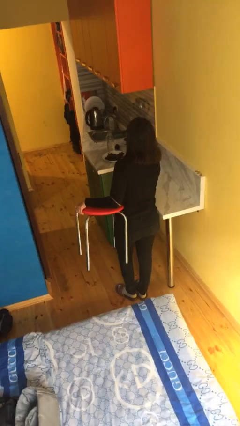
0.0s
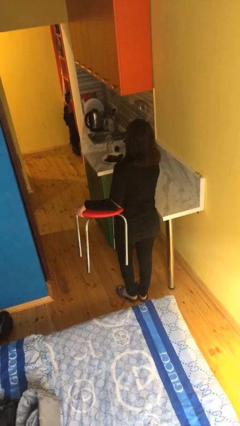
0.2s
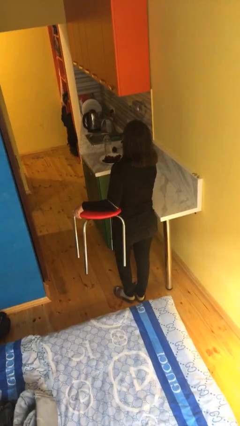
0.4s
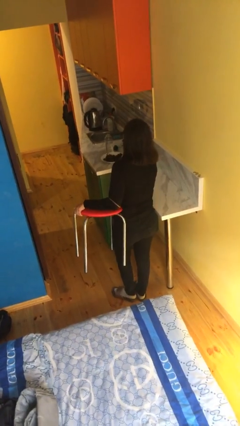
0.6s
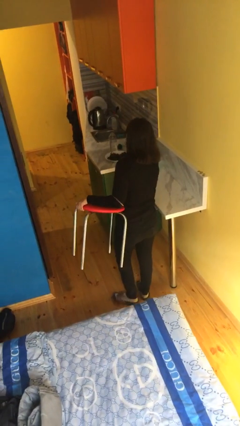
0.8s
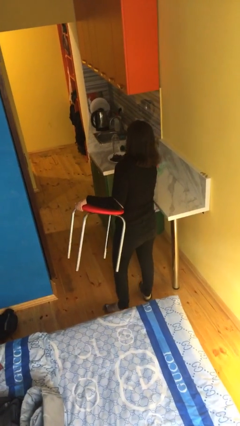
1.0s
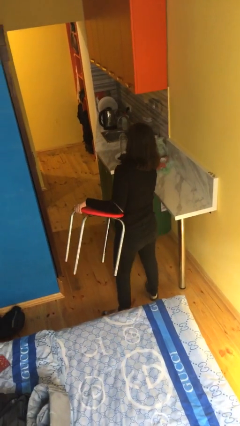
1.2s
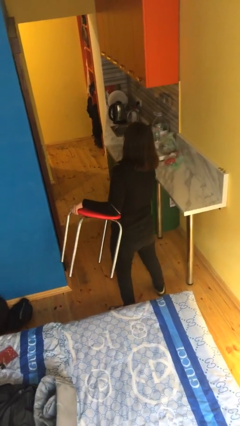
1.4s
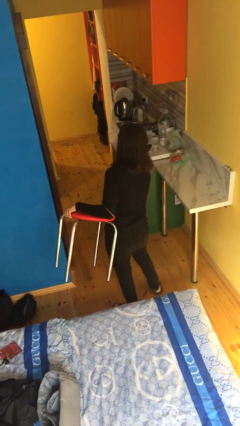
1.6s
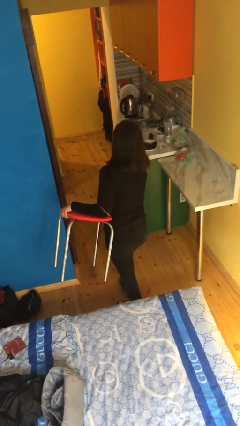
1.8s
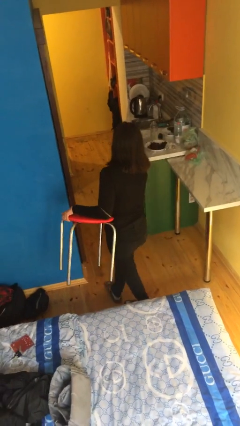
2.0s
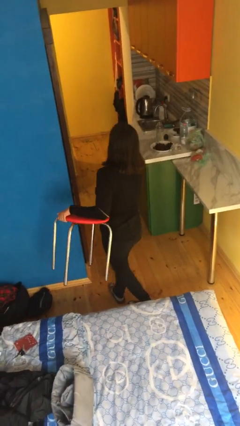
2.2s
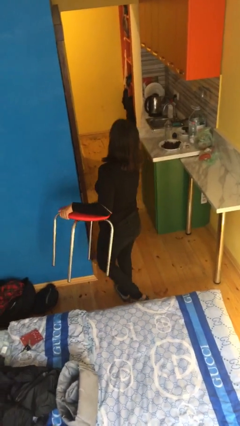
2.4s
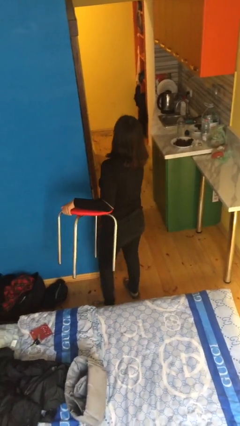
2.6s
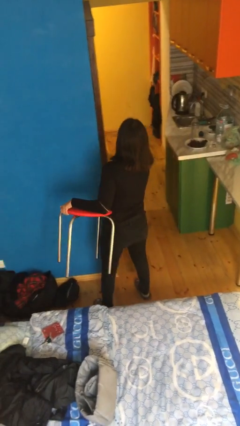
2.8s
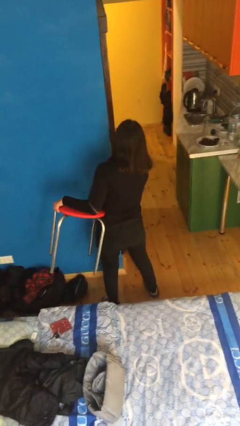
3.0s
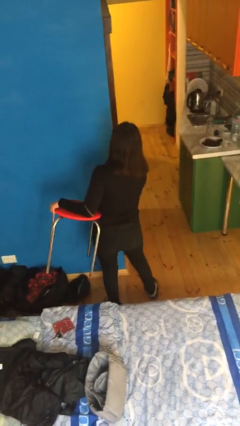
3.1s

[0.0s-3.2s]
person carries furniture

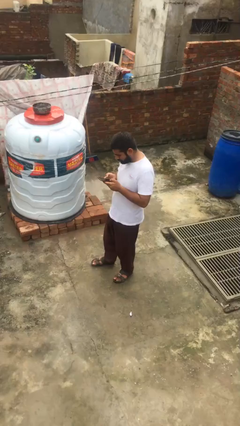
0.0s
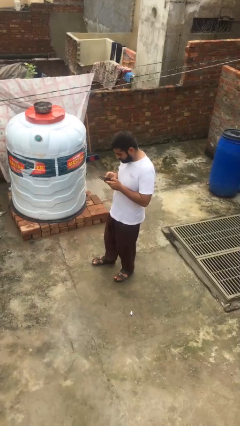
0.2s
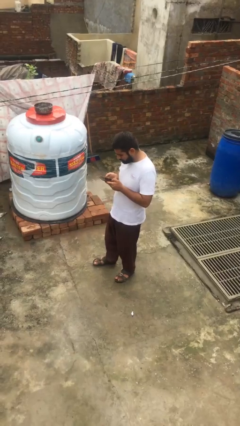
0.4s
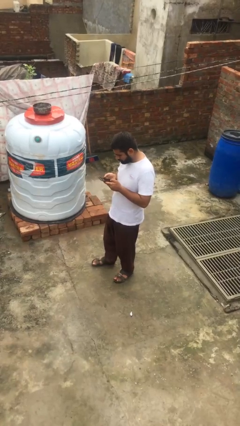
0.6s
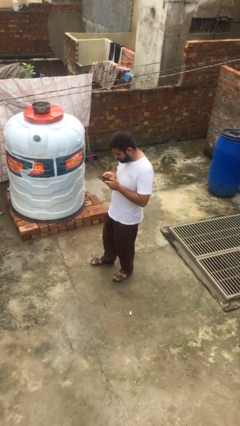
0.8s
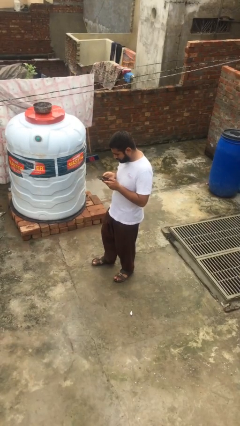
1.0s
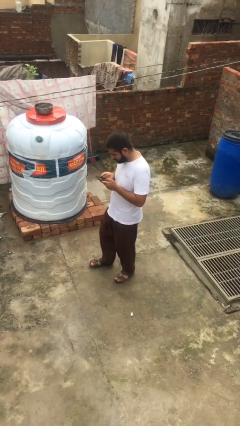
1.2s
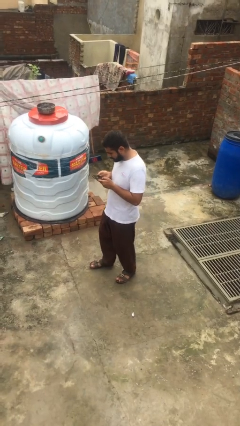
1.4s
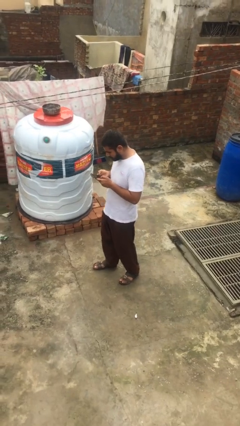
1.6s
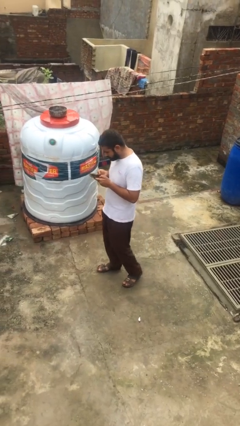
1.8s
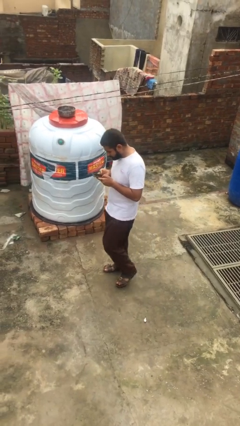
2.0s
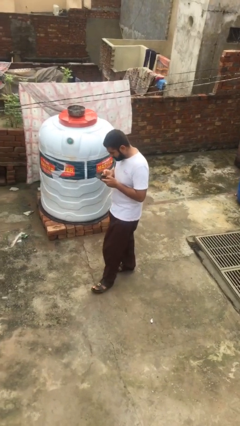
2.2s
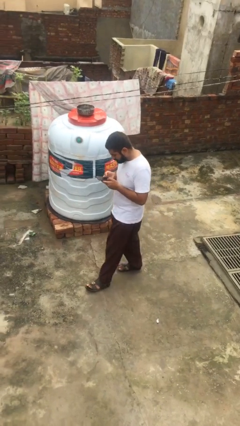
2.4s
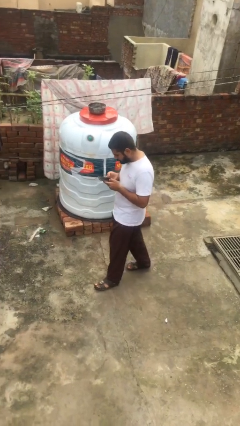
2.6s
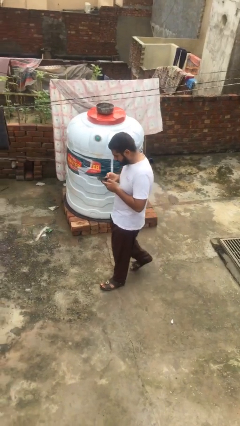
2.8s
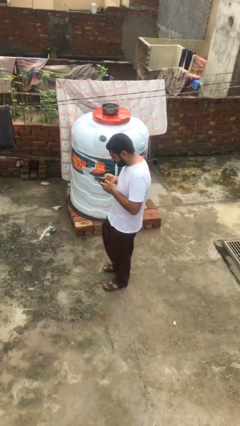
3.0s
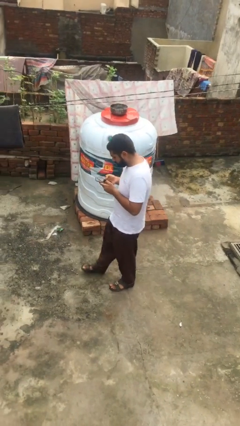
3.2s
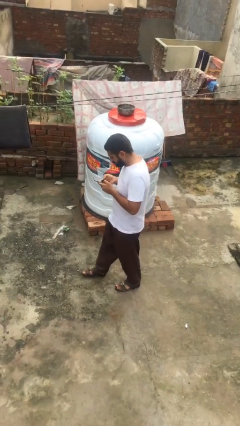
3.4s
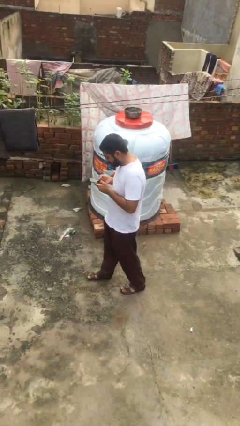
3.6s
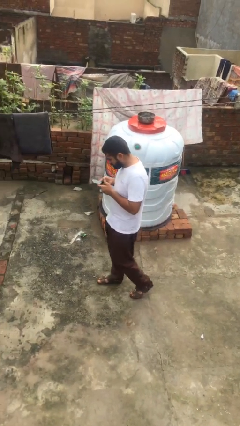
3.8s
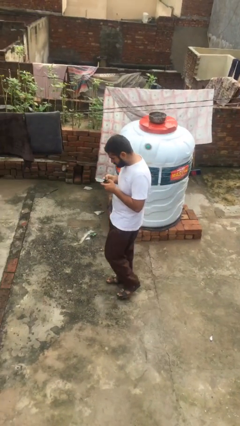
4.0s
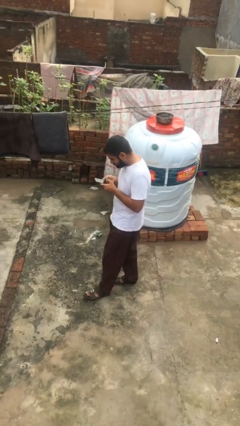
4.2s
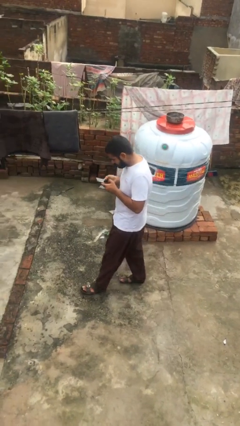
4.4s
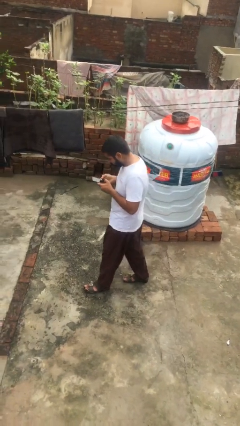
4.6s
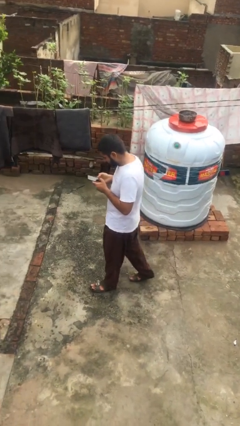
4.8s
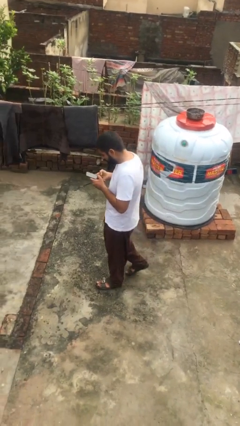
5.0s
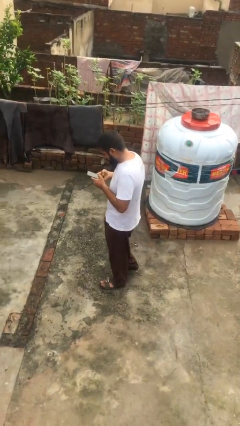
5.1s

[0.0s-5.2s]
person texts on phone

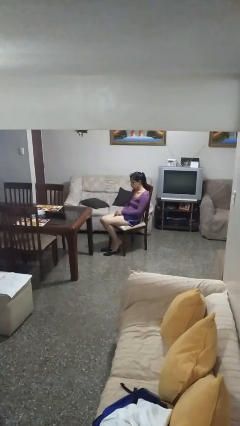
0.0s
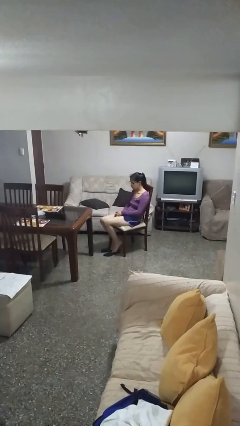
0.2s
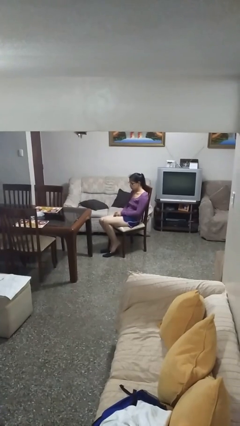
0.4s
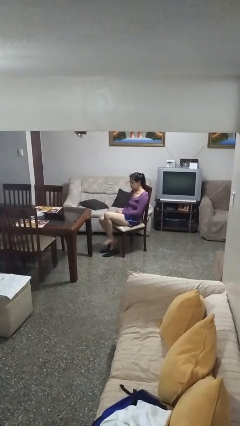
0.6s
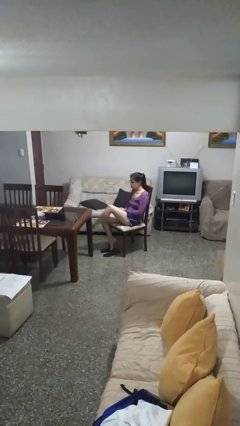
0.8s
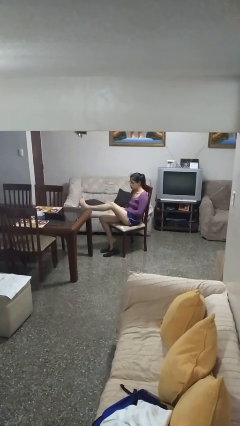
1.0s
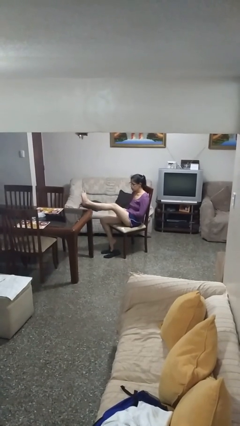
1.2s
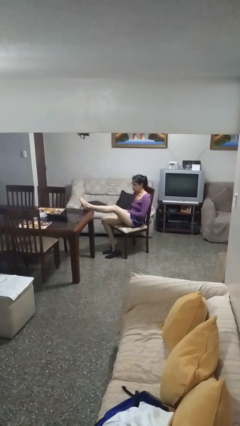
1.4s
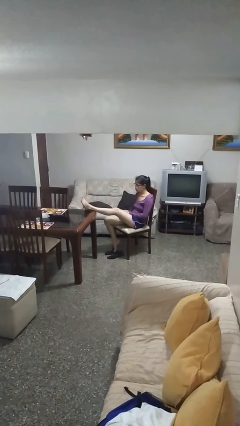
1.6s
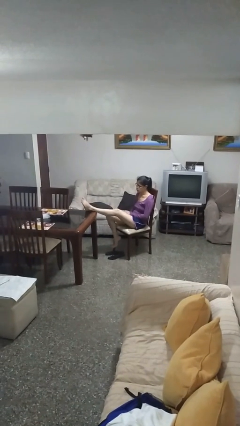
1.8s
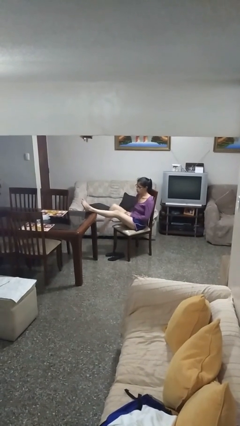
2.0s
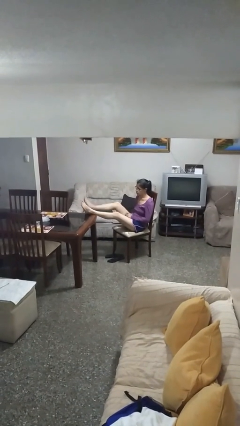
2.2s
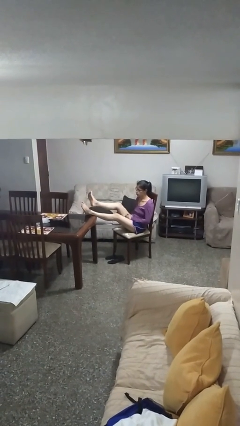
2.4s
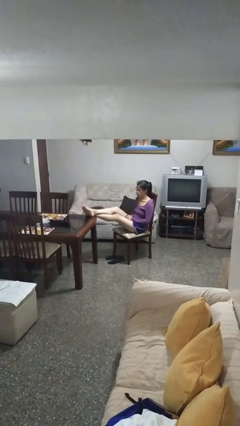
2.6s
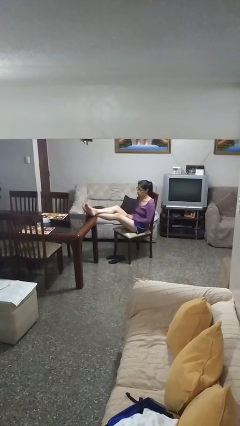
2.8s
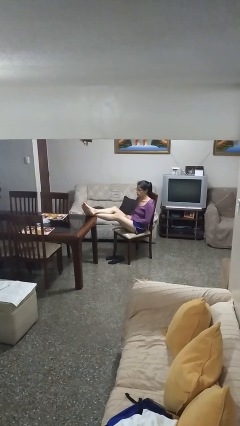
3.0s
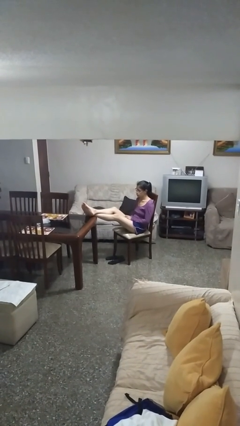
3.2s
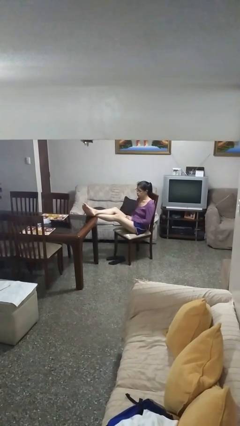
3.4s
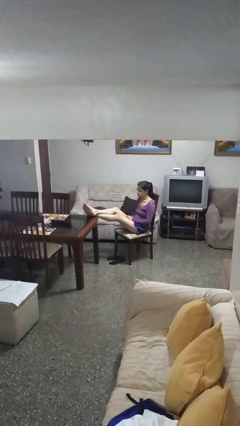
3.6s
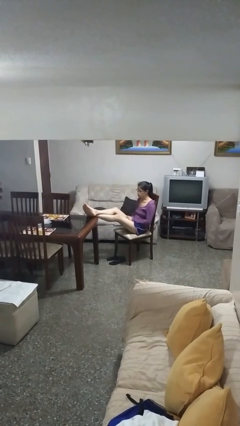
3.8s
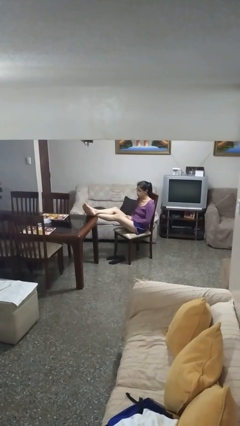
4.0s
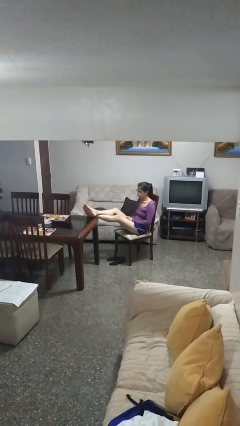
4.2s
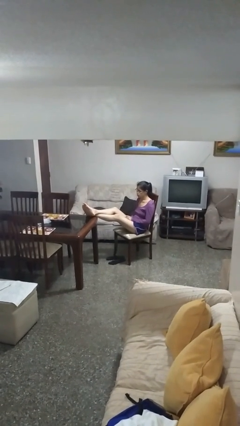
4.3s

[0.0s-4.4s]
person puts feet up

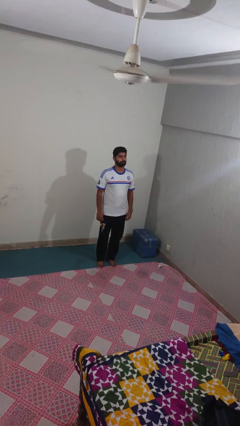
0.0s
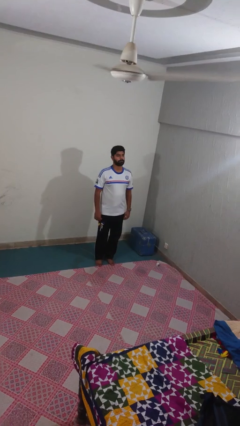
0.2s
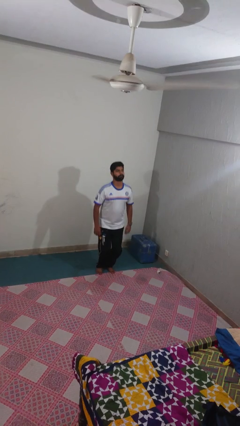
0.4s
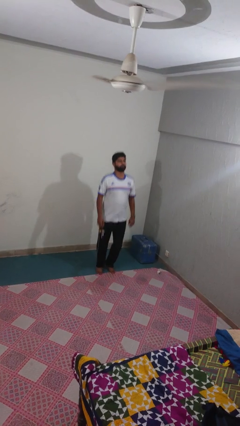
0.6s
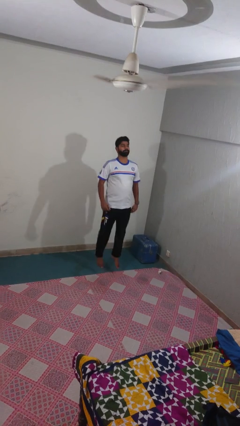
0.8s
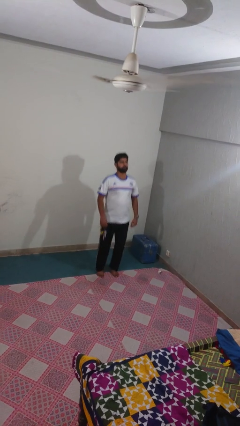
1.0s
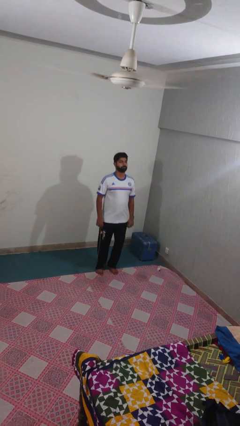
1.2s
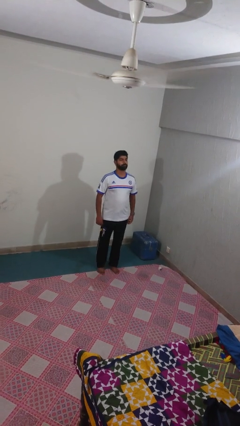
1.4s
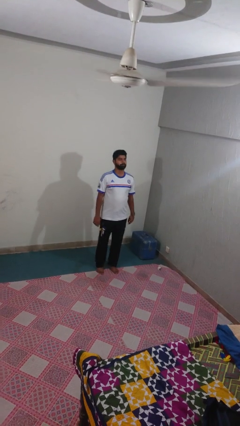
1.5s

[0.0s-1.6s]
person jumps

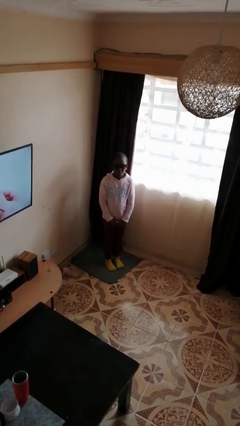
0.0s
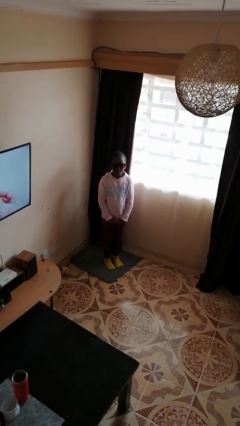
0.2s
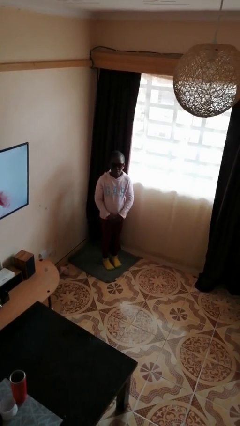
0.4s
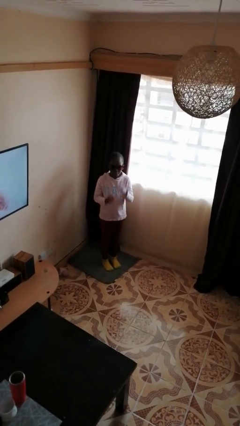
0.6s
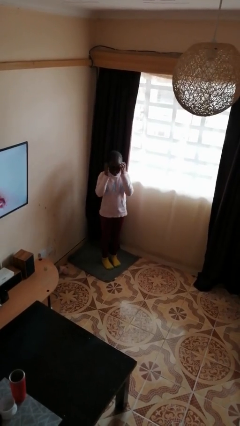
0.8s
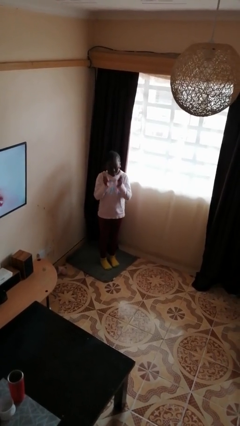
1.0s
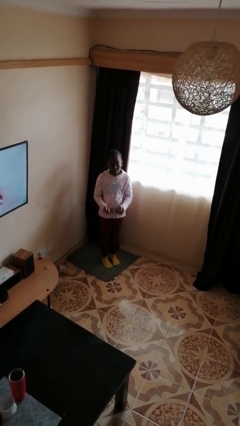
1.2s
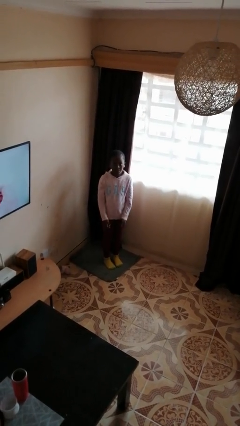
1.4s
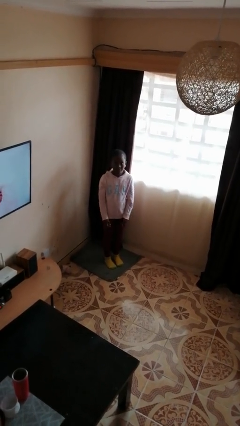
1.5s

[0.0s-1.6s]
person takes off sunglasses

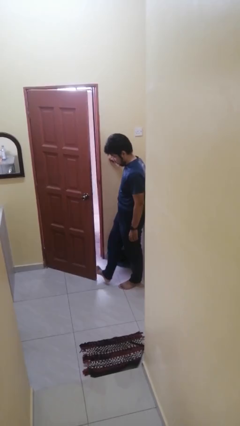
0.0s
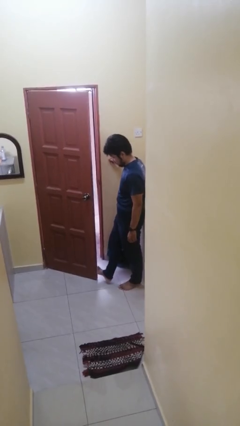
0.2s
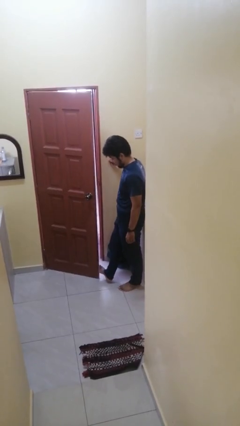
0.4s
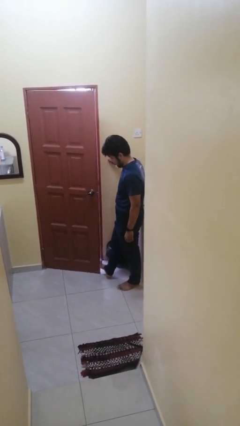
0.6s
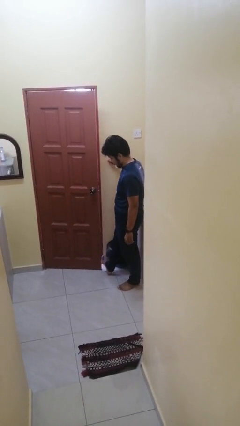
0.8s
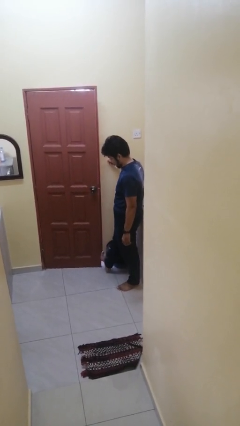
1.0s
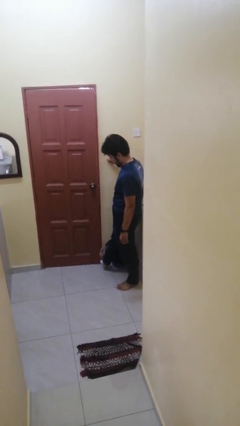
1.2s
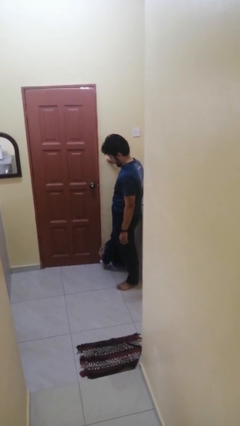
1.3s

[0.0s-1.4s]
person closes door with foot
